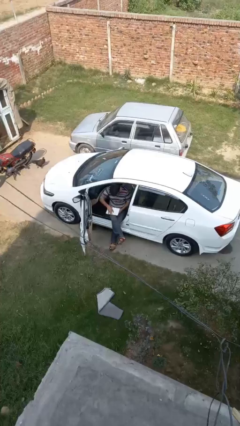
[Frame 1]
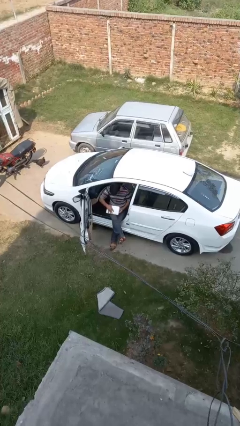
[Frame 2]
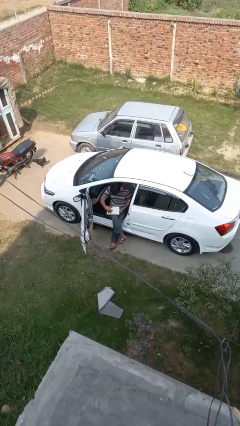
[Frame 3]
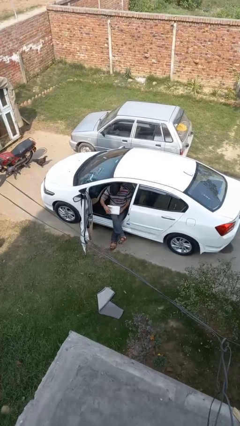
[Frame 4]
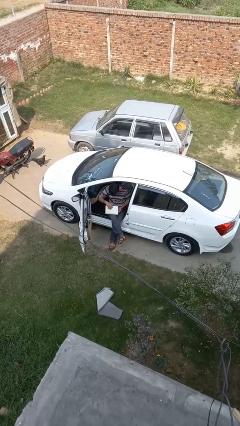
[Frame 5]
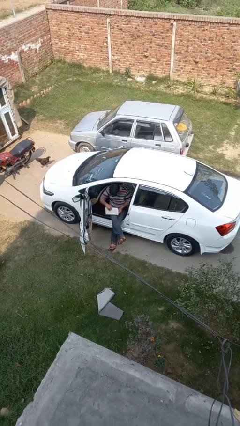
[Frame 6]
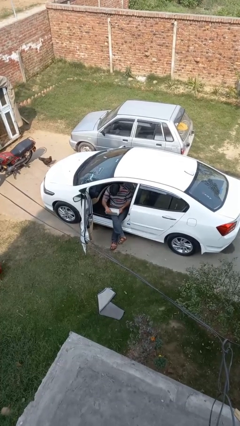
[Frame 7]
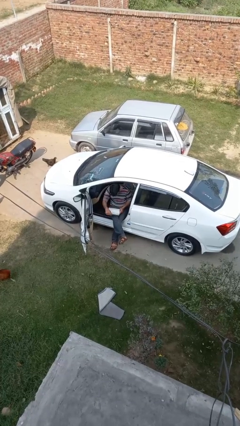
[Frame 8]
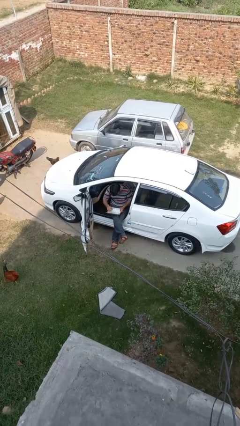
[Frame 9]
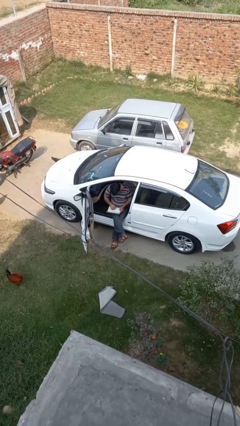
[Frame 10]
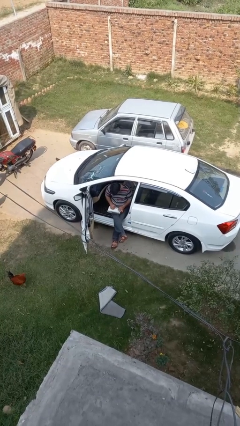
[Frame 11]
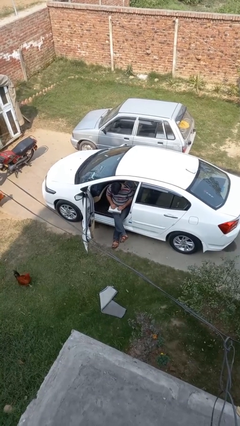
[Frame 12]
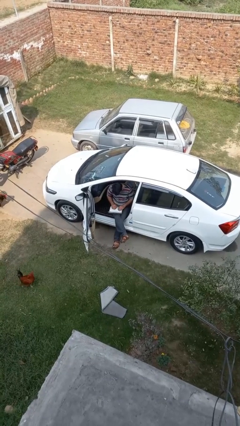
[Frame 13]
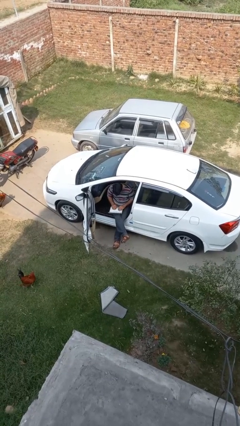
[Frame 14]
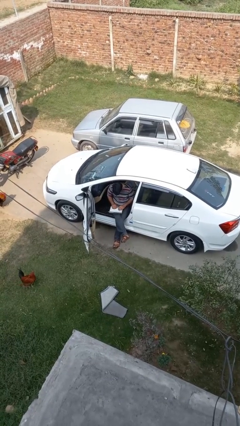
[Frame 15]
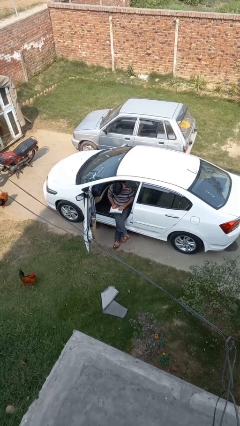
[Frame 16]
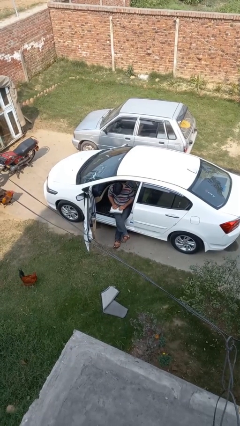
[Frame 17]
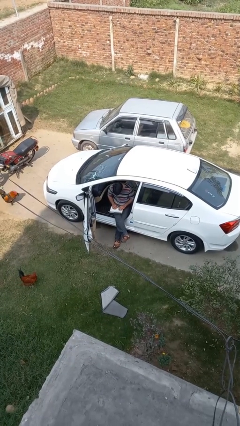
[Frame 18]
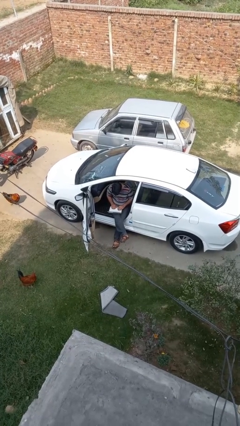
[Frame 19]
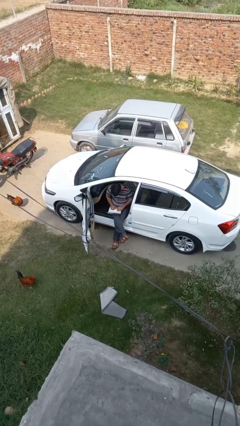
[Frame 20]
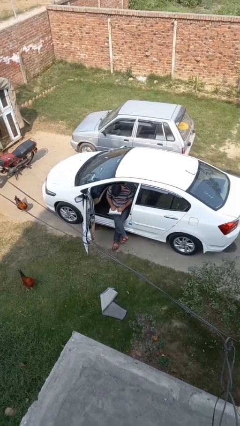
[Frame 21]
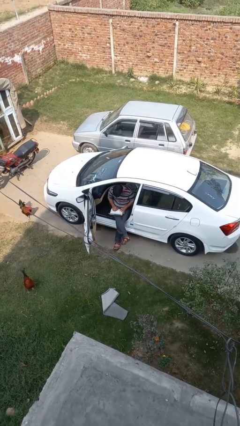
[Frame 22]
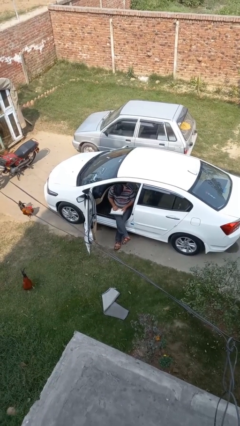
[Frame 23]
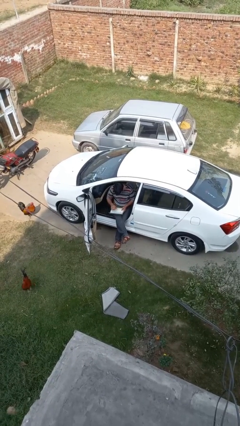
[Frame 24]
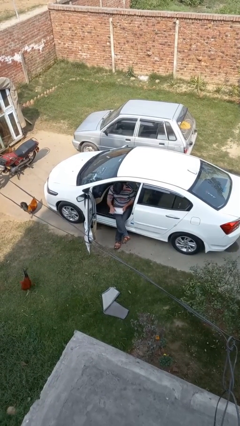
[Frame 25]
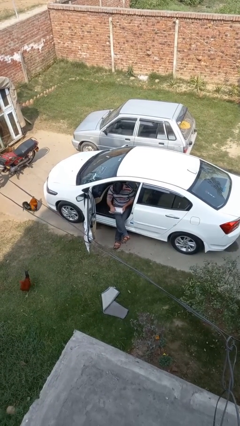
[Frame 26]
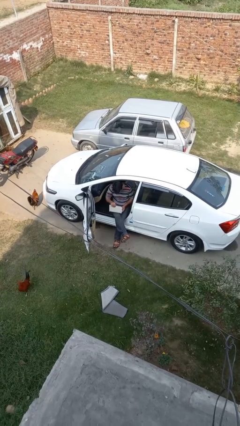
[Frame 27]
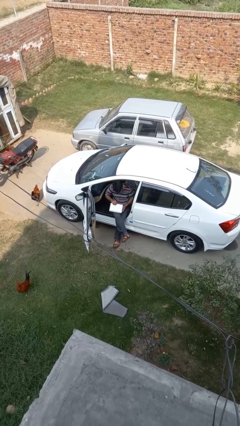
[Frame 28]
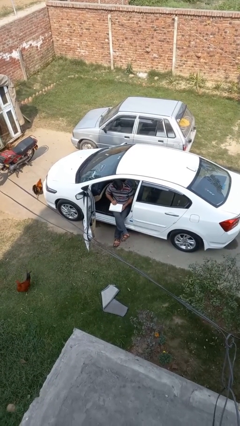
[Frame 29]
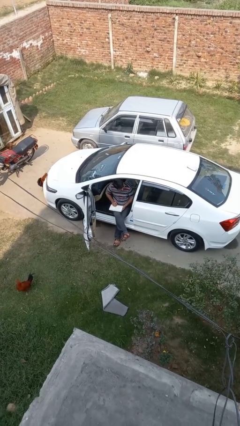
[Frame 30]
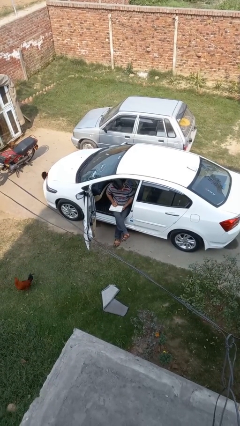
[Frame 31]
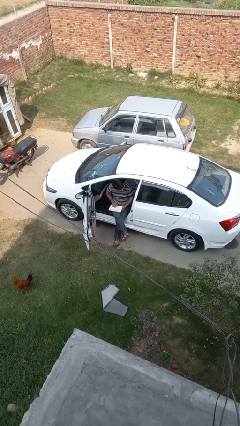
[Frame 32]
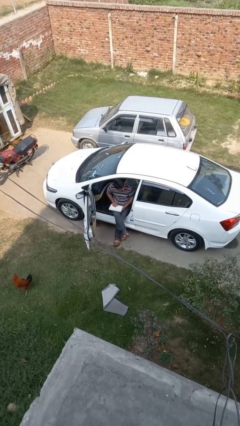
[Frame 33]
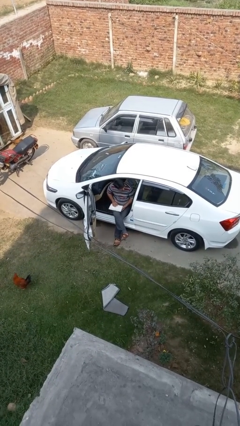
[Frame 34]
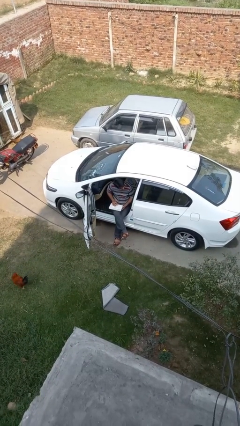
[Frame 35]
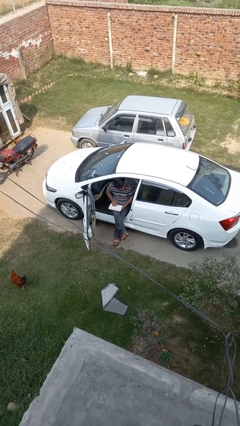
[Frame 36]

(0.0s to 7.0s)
person interacts with laptop

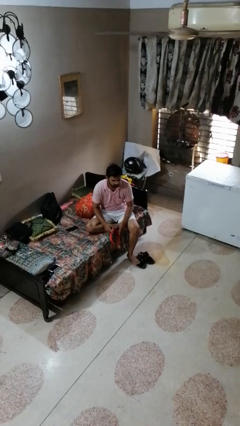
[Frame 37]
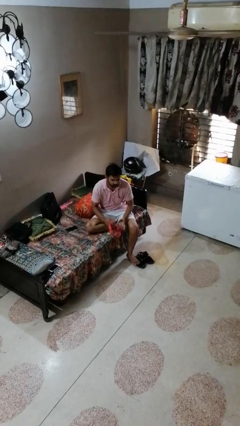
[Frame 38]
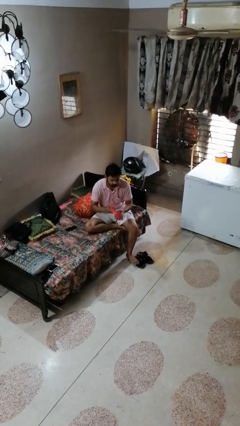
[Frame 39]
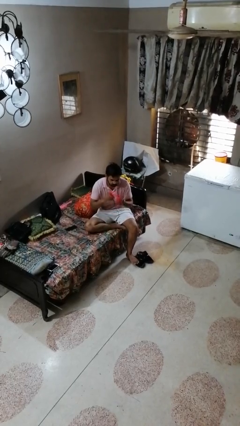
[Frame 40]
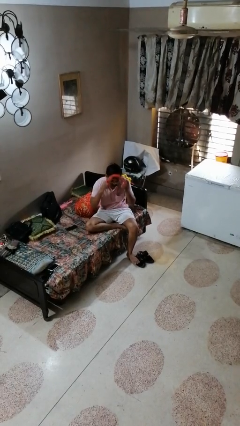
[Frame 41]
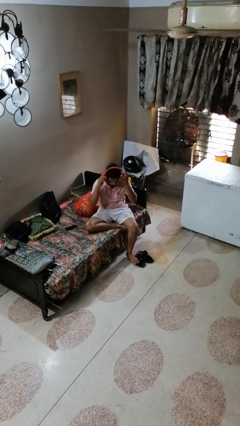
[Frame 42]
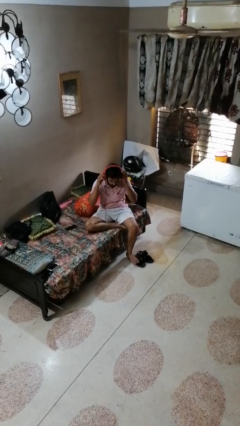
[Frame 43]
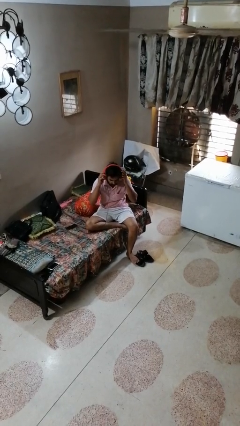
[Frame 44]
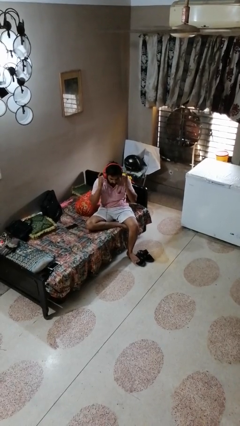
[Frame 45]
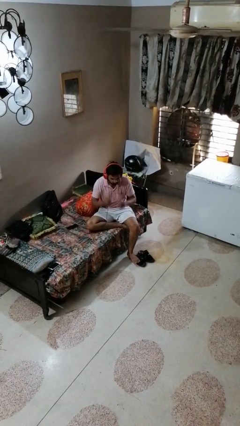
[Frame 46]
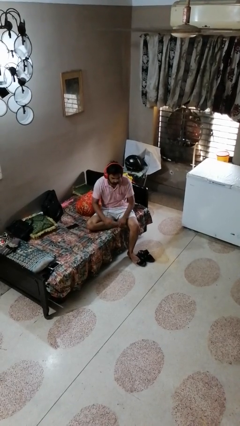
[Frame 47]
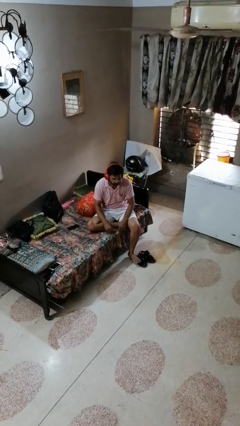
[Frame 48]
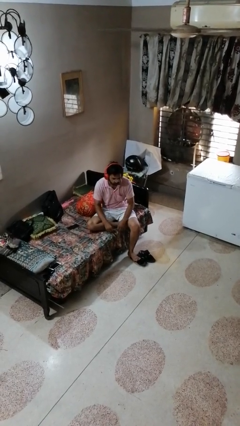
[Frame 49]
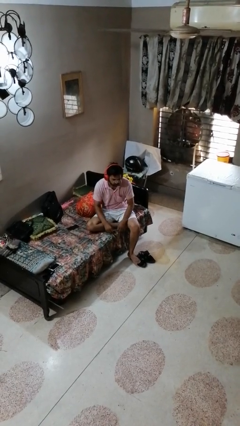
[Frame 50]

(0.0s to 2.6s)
person puts on headphones

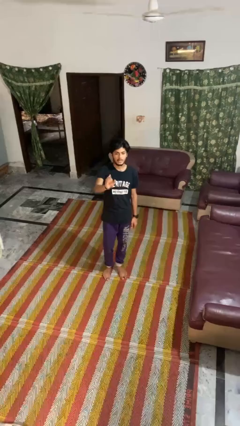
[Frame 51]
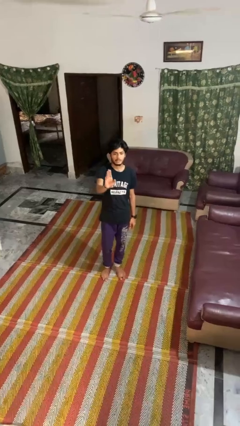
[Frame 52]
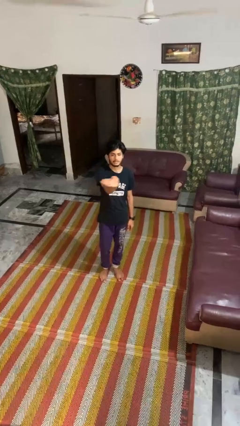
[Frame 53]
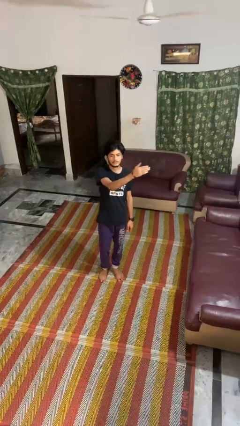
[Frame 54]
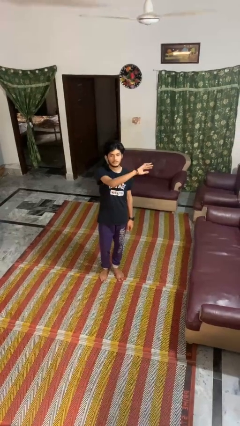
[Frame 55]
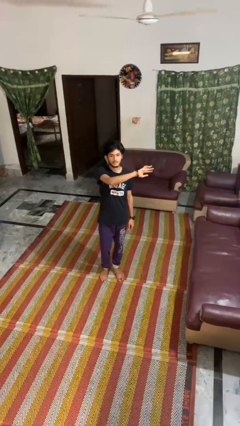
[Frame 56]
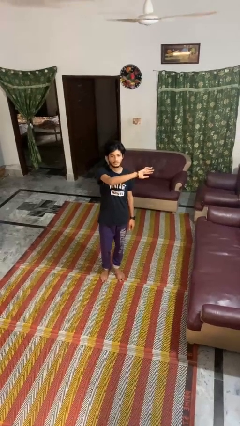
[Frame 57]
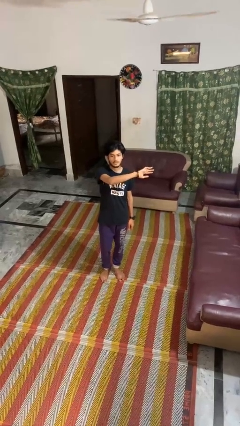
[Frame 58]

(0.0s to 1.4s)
person gestures swipe left

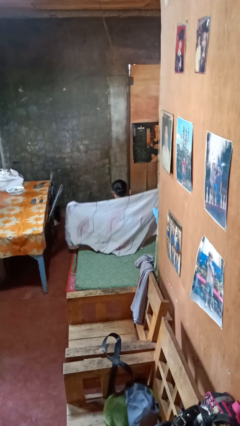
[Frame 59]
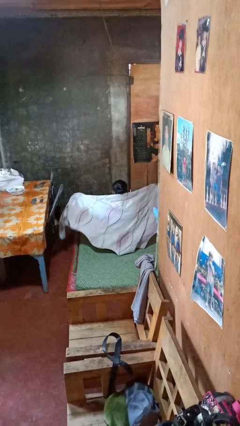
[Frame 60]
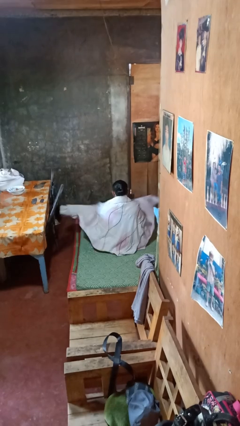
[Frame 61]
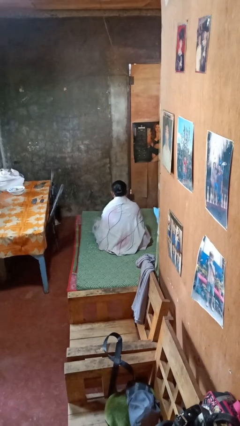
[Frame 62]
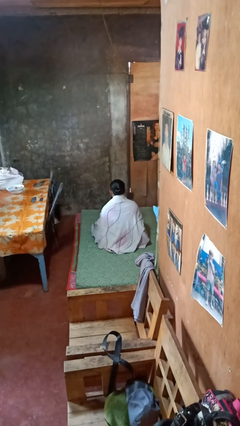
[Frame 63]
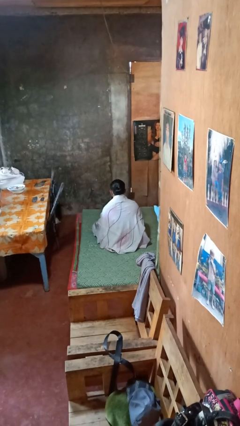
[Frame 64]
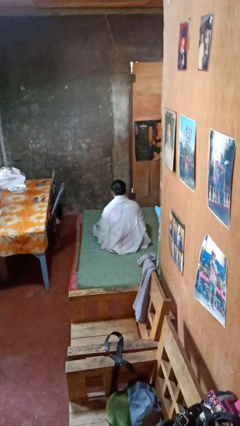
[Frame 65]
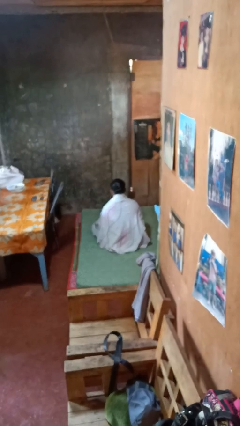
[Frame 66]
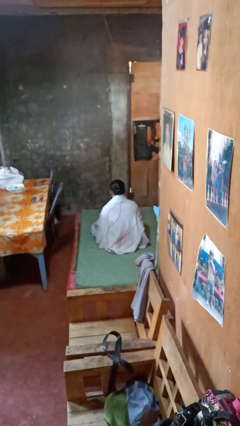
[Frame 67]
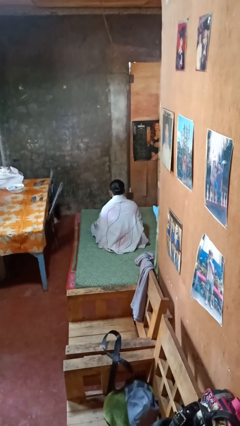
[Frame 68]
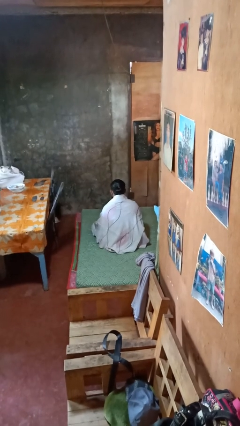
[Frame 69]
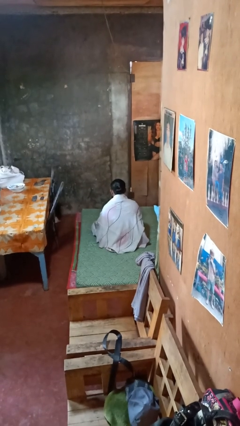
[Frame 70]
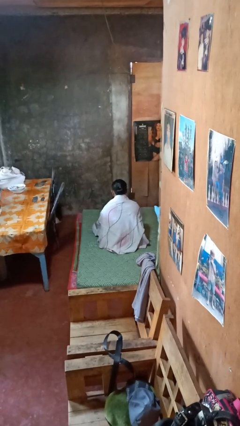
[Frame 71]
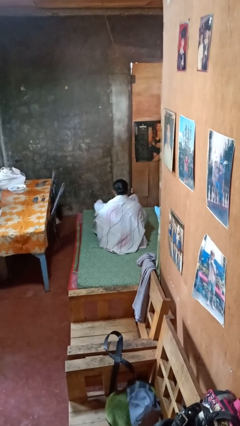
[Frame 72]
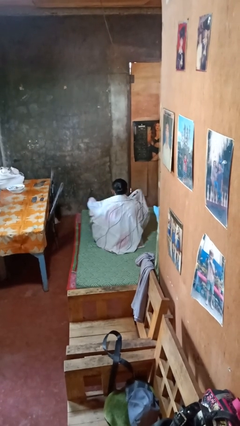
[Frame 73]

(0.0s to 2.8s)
person covers with blanket

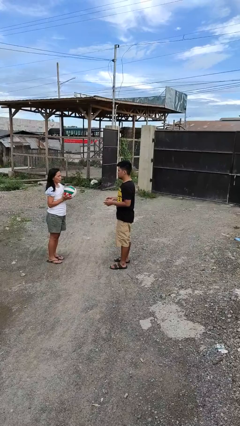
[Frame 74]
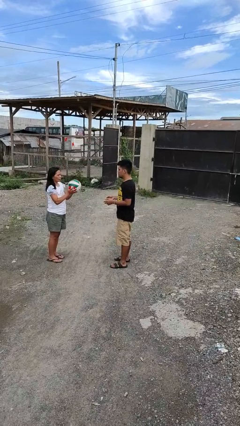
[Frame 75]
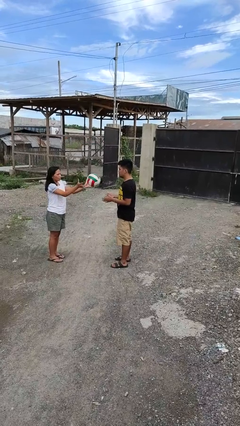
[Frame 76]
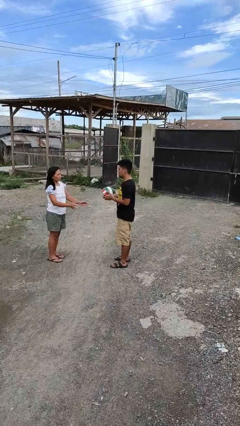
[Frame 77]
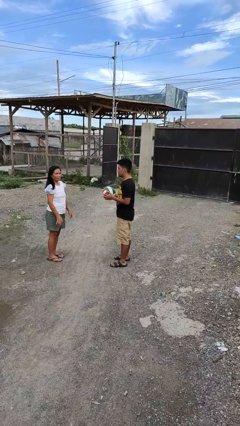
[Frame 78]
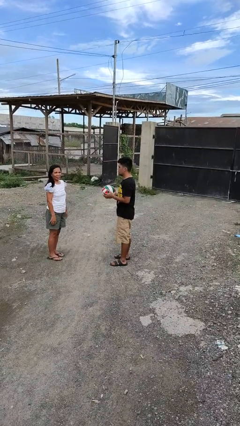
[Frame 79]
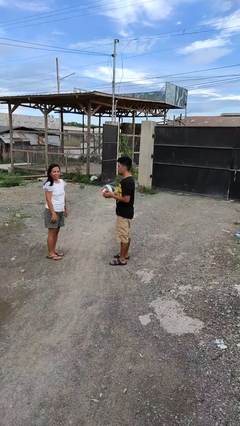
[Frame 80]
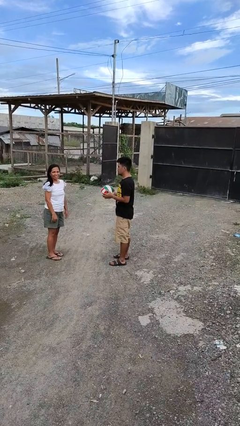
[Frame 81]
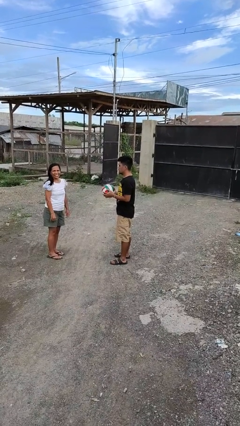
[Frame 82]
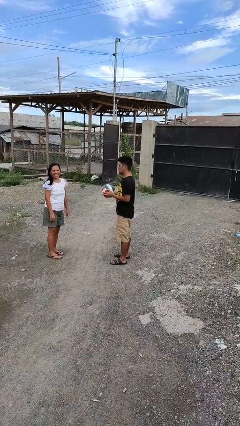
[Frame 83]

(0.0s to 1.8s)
person catches object from person

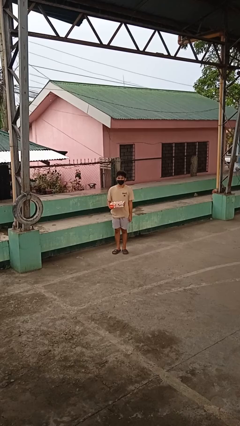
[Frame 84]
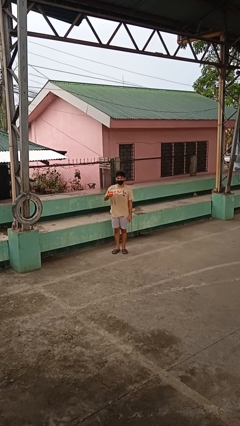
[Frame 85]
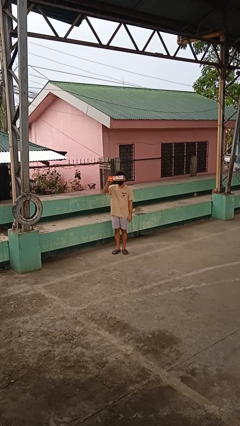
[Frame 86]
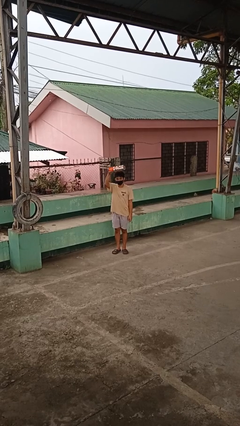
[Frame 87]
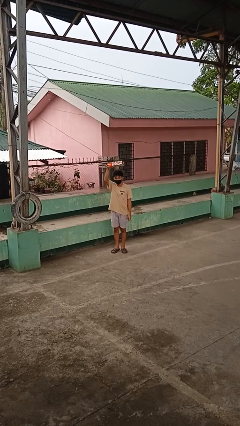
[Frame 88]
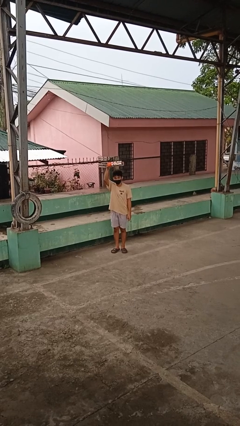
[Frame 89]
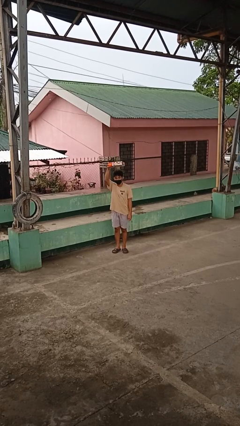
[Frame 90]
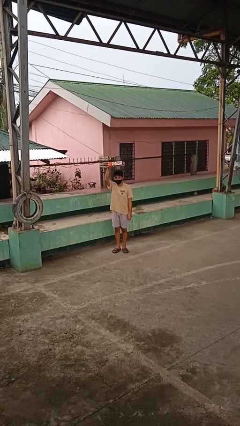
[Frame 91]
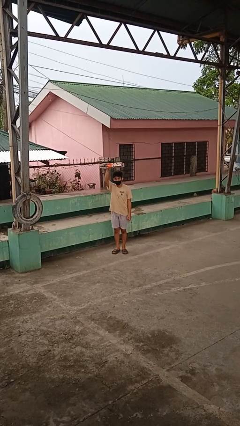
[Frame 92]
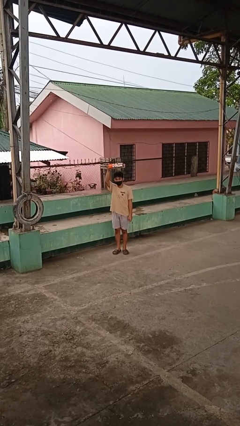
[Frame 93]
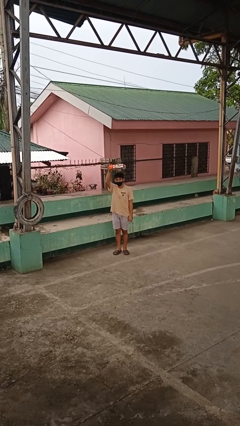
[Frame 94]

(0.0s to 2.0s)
person holds object above head
